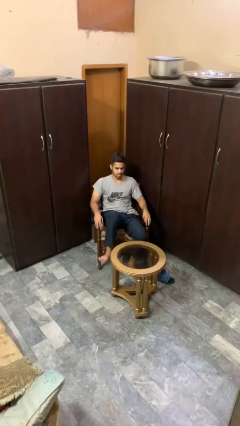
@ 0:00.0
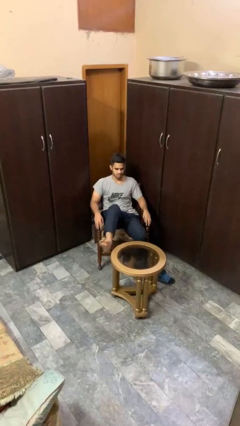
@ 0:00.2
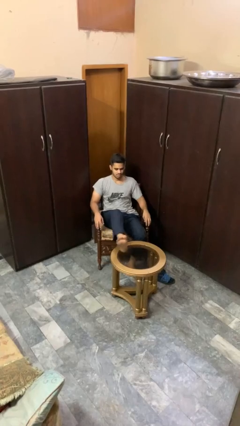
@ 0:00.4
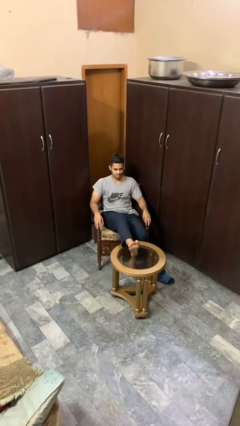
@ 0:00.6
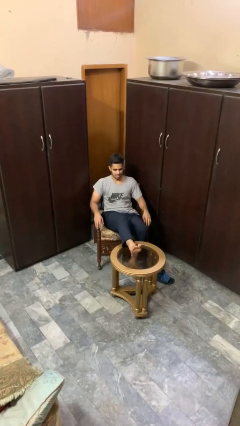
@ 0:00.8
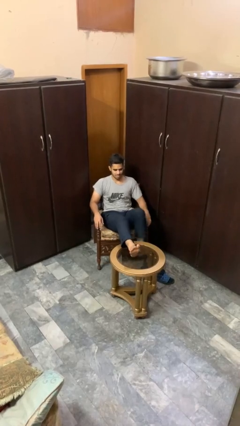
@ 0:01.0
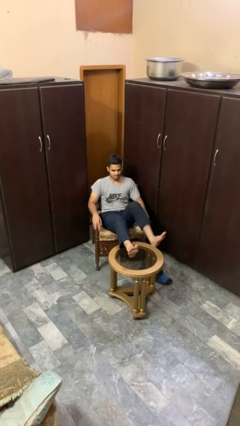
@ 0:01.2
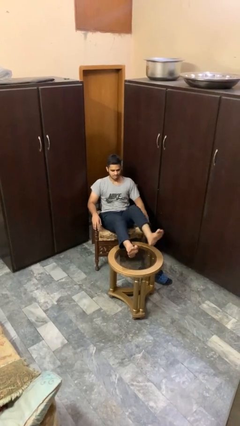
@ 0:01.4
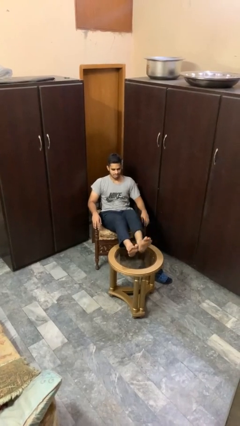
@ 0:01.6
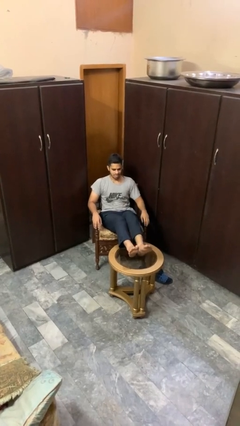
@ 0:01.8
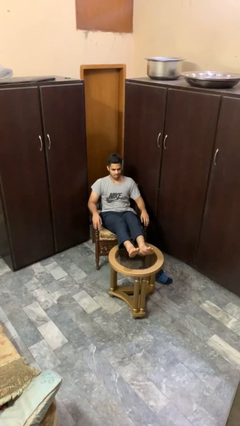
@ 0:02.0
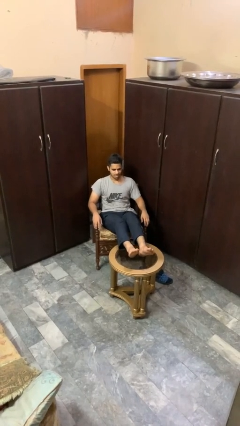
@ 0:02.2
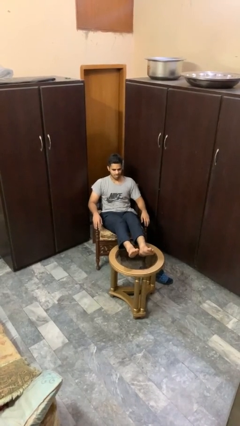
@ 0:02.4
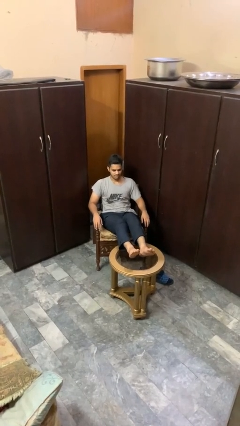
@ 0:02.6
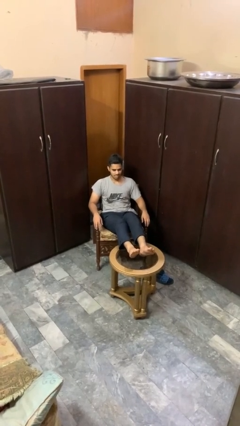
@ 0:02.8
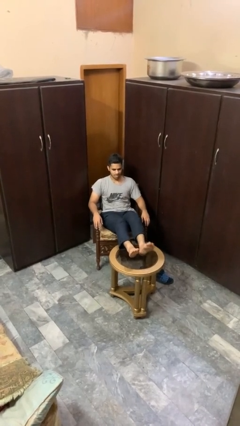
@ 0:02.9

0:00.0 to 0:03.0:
person puts feet up

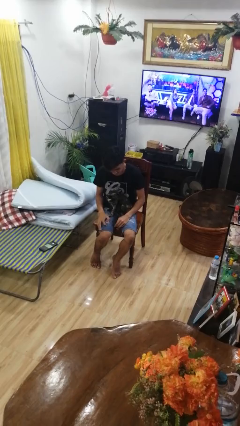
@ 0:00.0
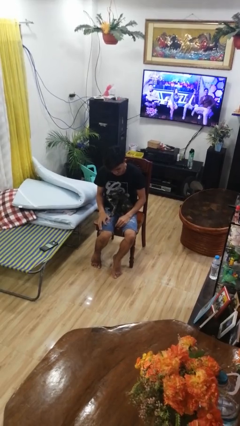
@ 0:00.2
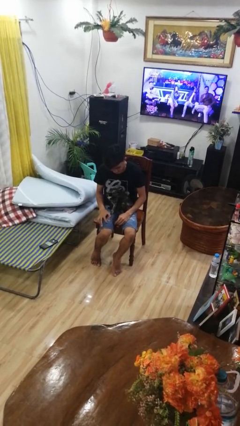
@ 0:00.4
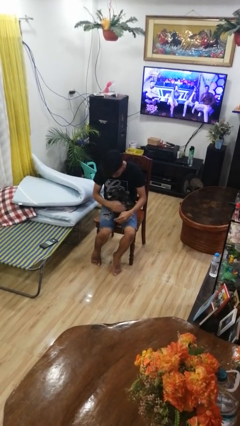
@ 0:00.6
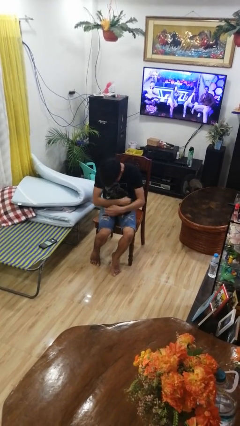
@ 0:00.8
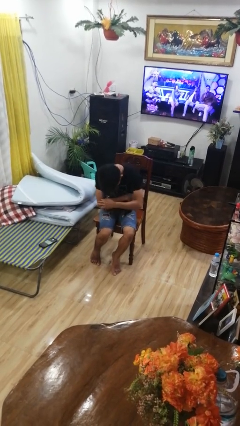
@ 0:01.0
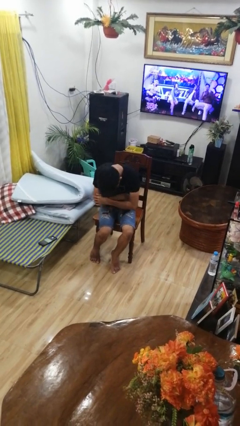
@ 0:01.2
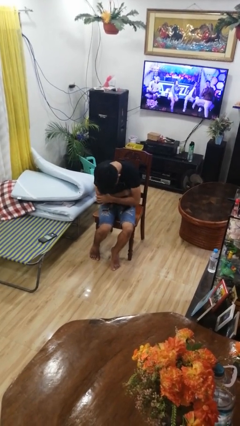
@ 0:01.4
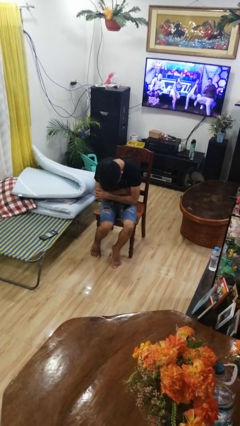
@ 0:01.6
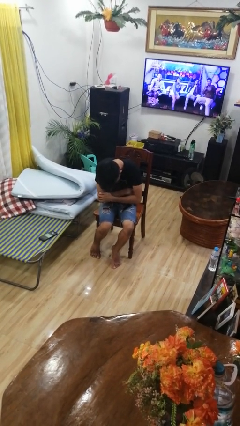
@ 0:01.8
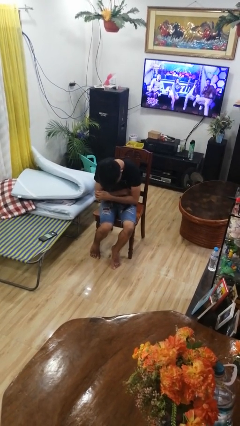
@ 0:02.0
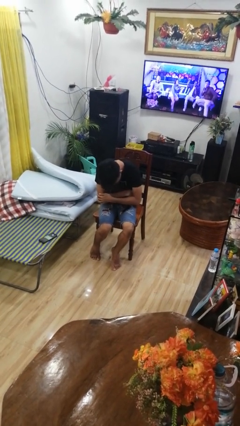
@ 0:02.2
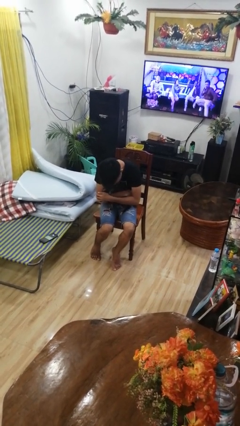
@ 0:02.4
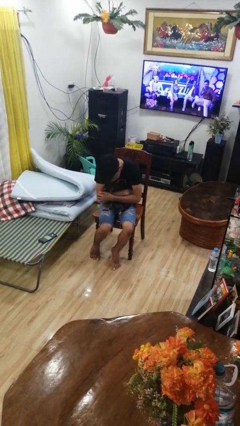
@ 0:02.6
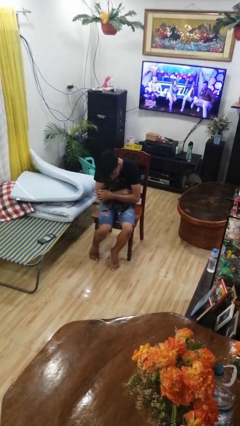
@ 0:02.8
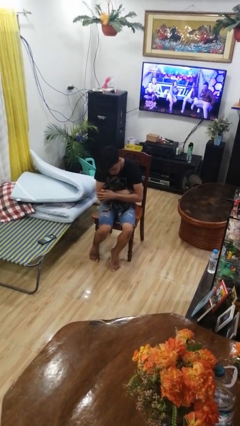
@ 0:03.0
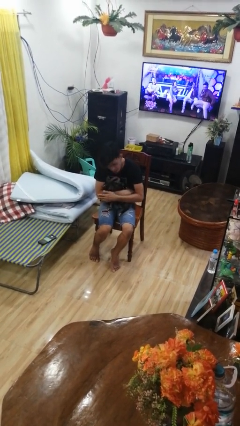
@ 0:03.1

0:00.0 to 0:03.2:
person hugs cat

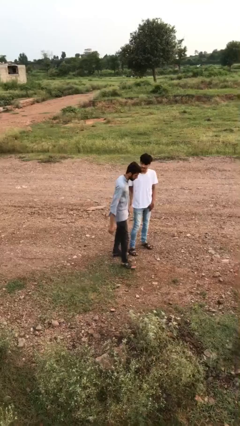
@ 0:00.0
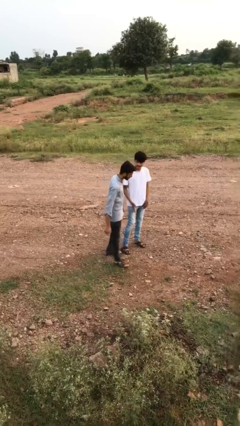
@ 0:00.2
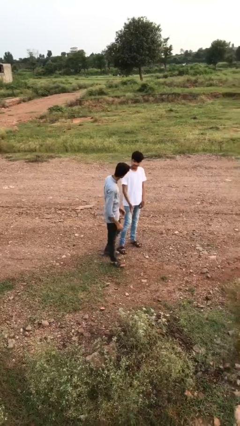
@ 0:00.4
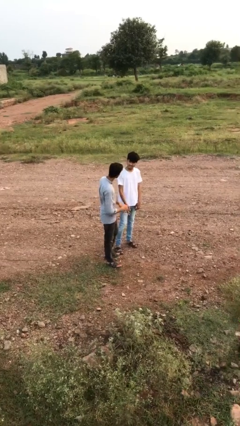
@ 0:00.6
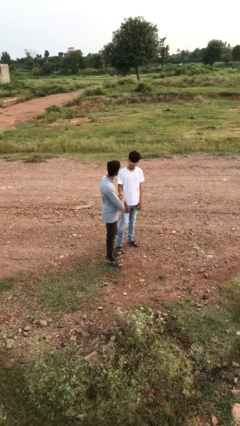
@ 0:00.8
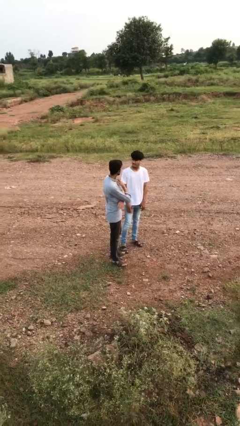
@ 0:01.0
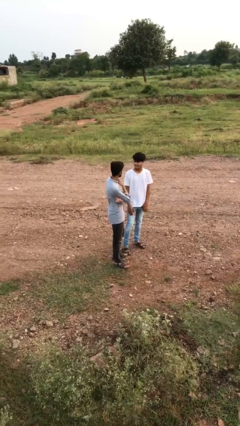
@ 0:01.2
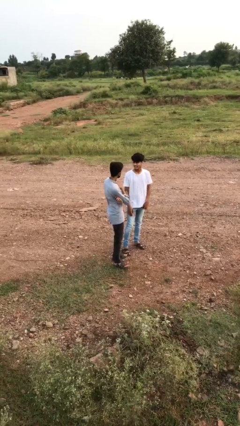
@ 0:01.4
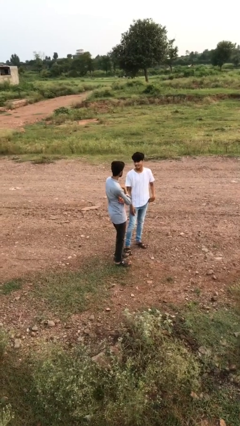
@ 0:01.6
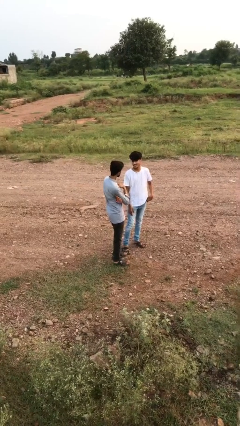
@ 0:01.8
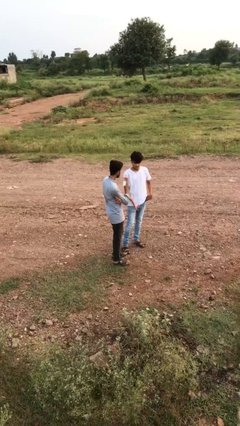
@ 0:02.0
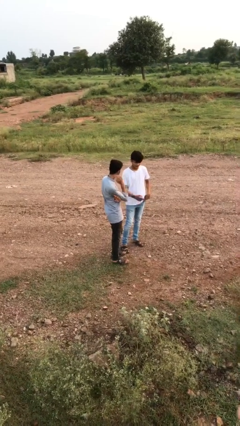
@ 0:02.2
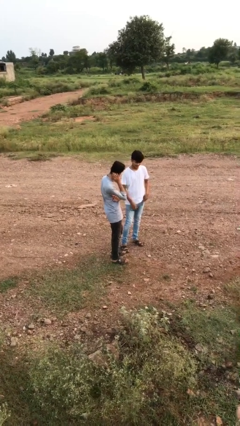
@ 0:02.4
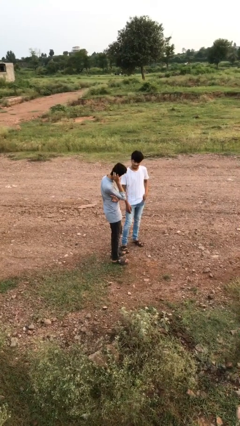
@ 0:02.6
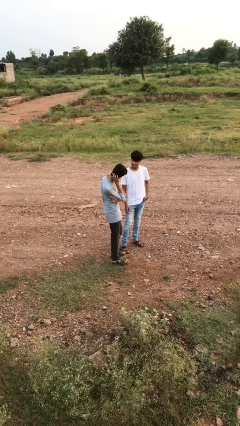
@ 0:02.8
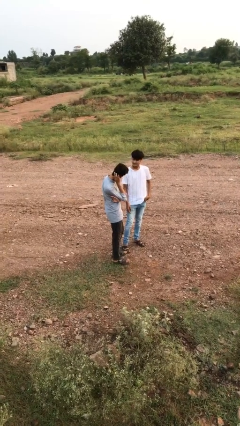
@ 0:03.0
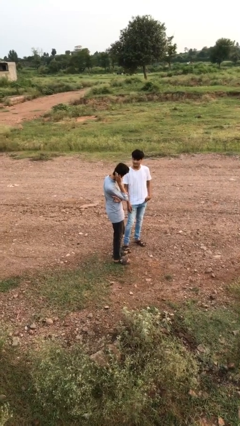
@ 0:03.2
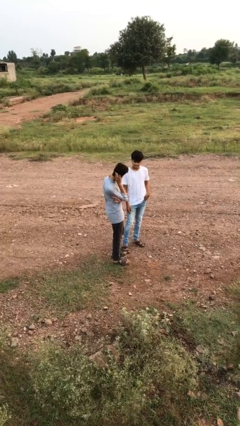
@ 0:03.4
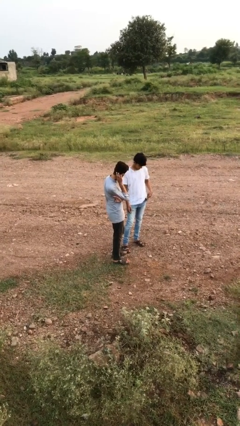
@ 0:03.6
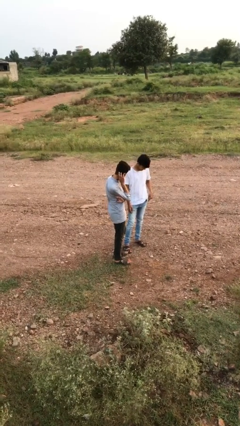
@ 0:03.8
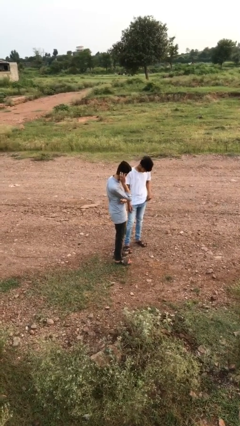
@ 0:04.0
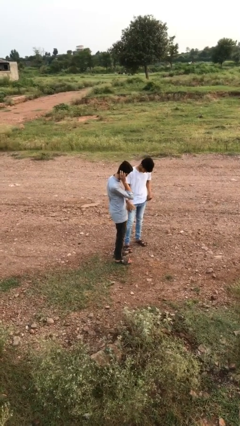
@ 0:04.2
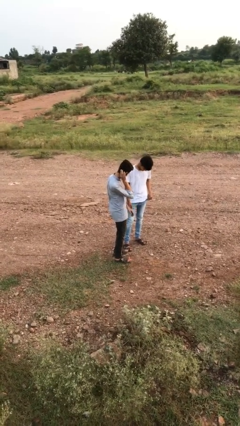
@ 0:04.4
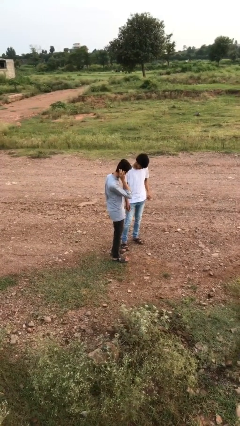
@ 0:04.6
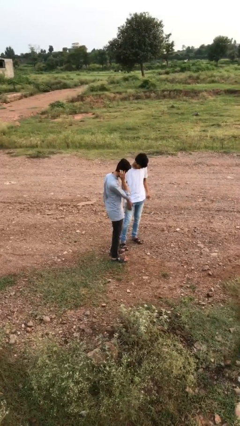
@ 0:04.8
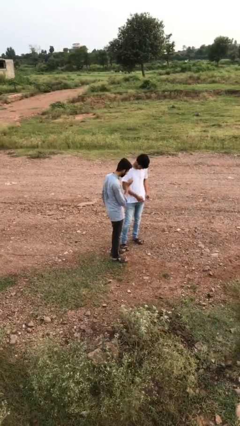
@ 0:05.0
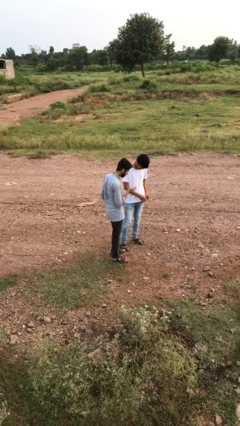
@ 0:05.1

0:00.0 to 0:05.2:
person talks to person

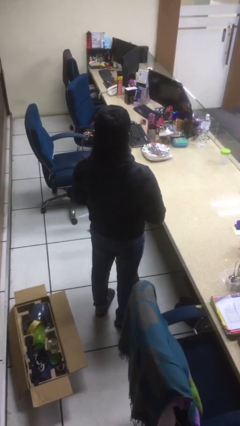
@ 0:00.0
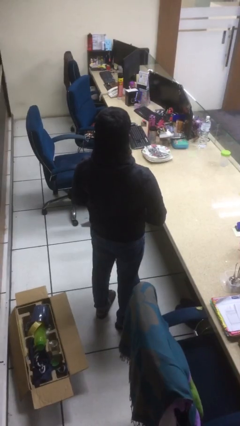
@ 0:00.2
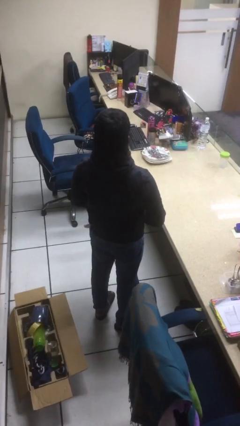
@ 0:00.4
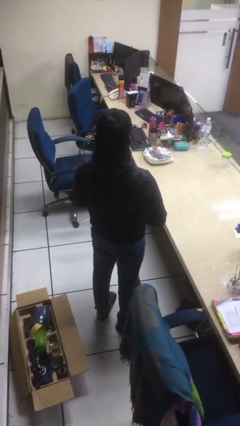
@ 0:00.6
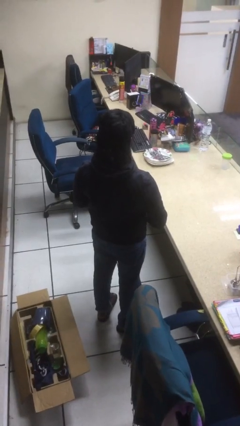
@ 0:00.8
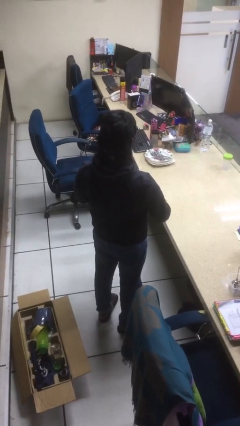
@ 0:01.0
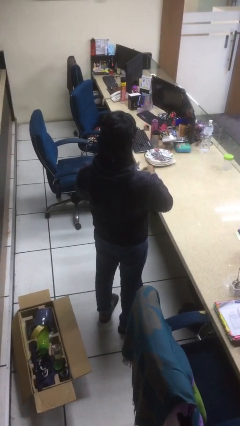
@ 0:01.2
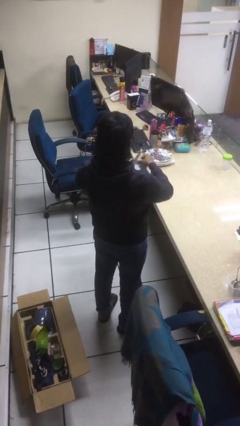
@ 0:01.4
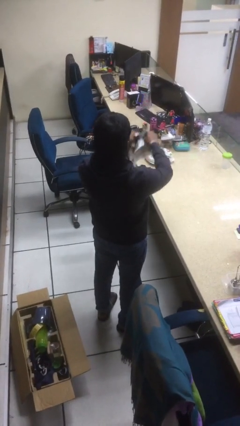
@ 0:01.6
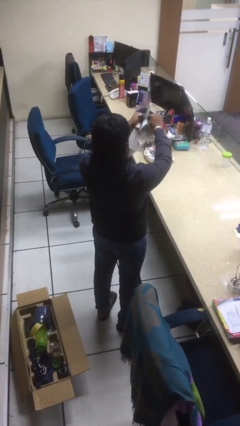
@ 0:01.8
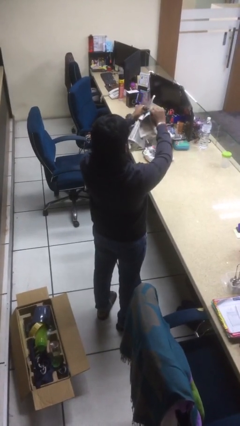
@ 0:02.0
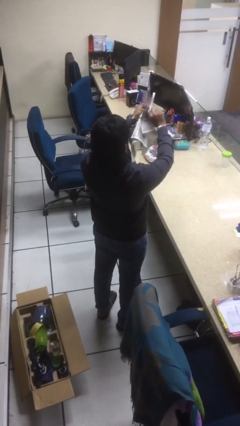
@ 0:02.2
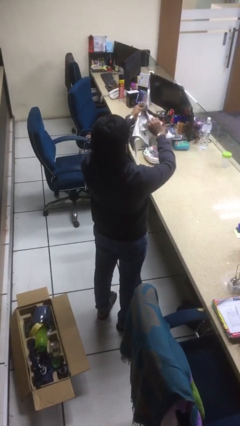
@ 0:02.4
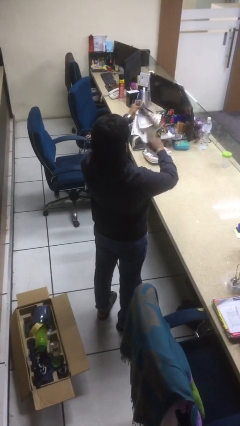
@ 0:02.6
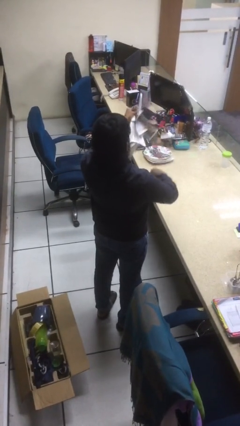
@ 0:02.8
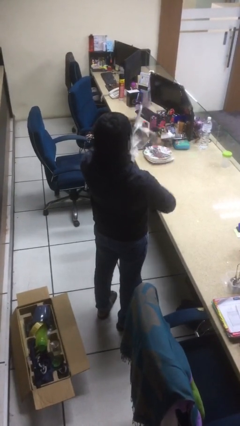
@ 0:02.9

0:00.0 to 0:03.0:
person tears paper

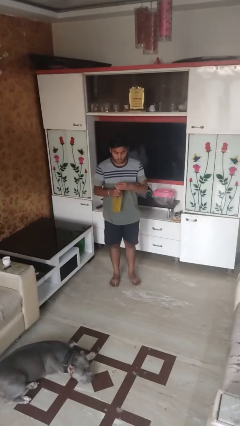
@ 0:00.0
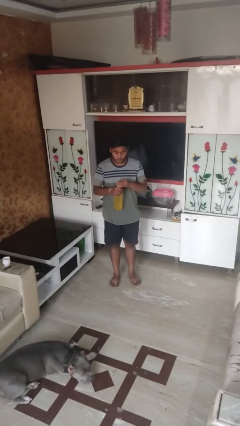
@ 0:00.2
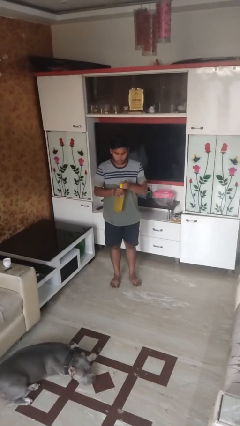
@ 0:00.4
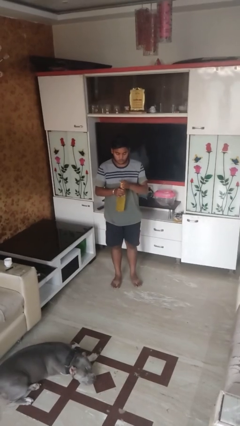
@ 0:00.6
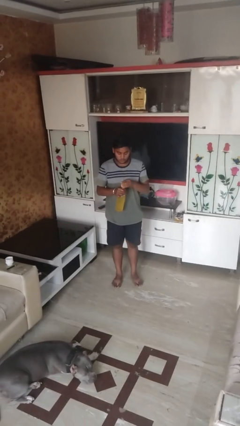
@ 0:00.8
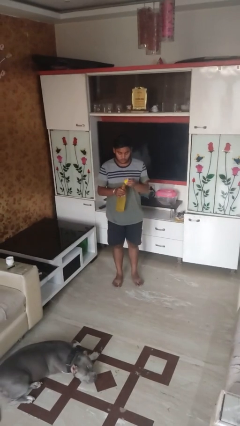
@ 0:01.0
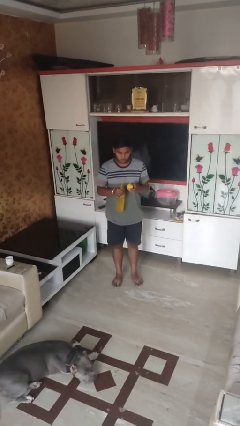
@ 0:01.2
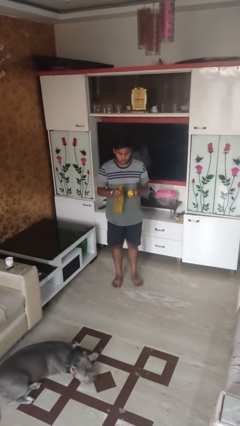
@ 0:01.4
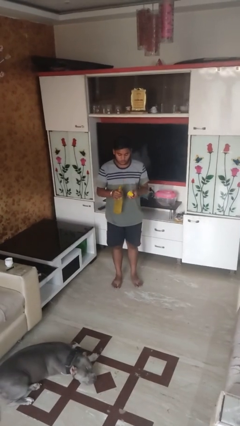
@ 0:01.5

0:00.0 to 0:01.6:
person unscrews lid from bottle

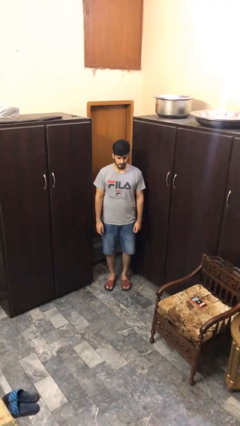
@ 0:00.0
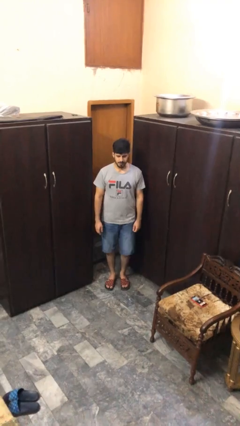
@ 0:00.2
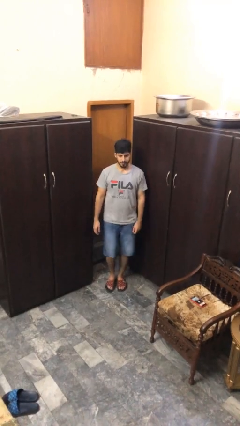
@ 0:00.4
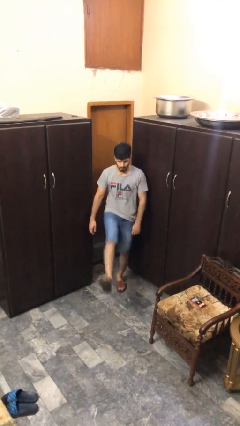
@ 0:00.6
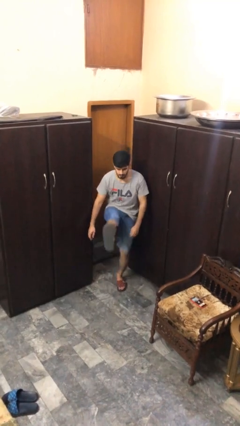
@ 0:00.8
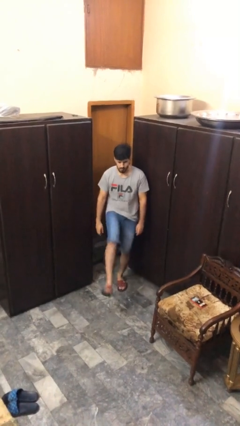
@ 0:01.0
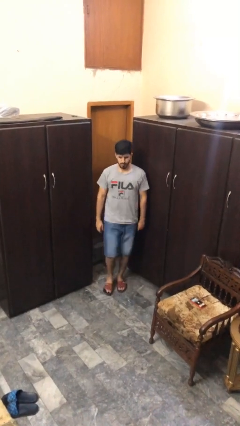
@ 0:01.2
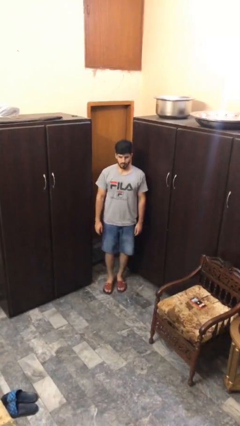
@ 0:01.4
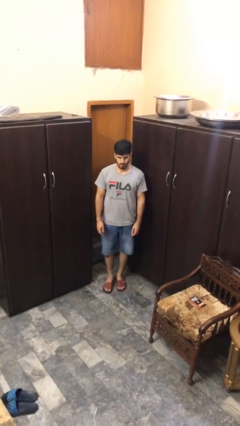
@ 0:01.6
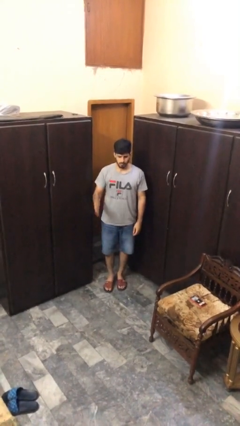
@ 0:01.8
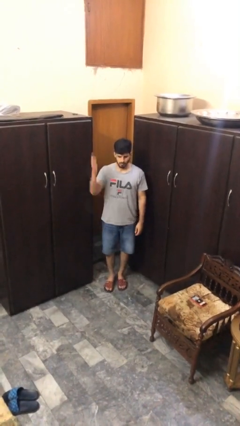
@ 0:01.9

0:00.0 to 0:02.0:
person karate kicks
